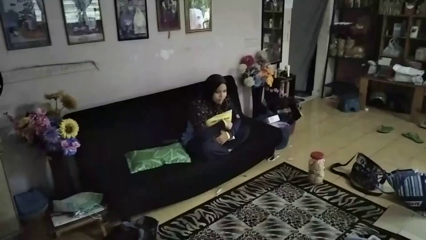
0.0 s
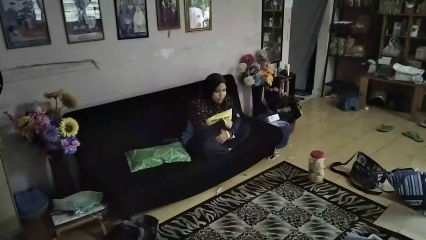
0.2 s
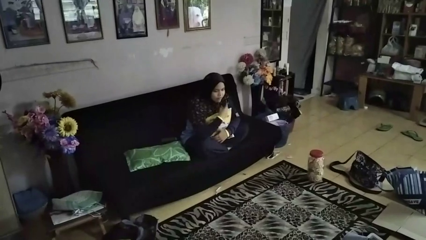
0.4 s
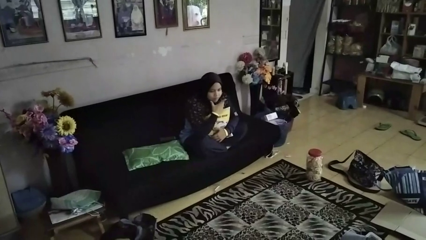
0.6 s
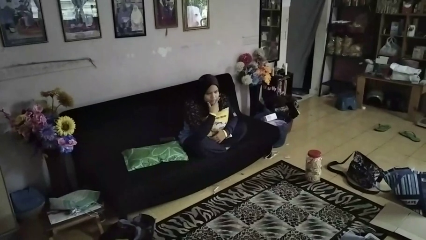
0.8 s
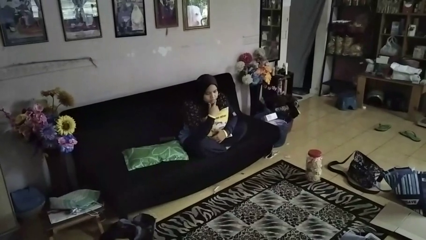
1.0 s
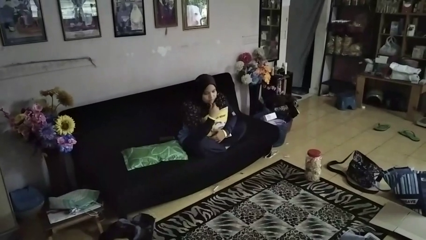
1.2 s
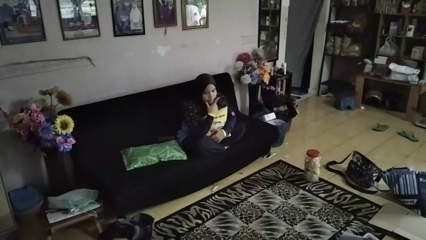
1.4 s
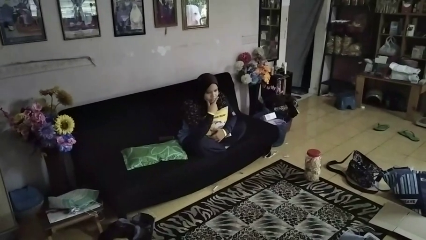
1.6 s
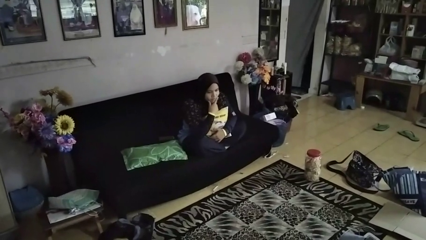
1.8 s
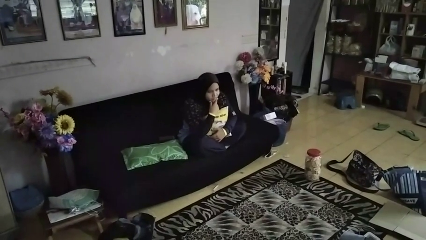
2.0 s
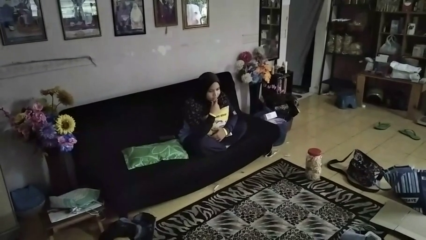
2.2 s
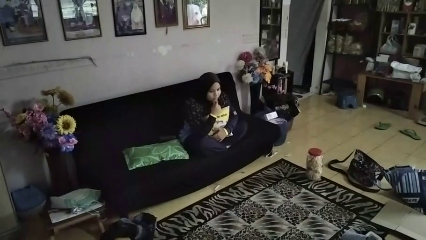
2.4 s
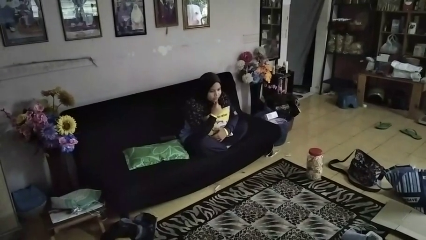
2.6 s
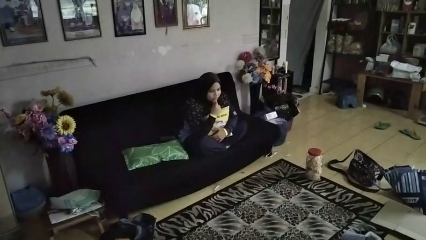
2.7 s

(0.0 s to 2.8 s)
person strokes chin

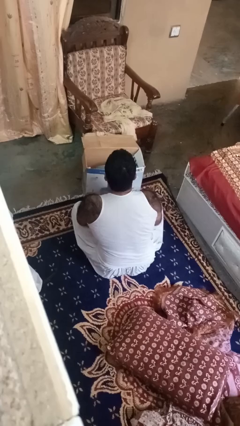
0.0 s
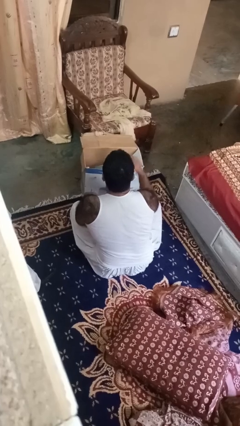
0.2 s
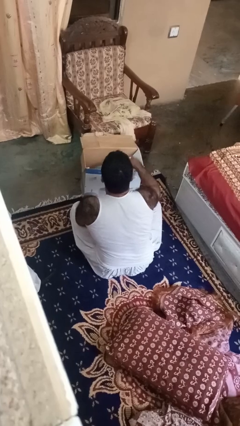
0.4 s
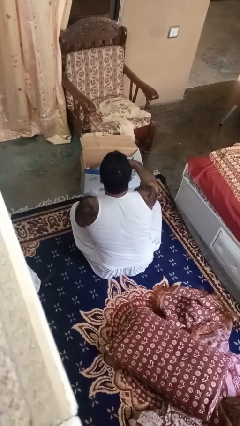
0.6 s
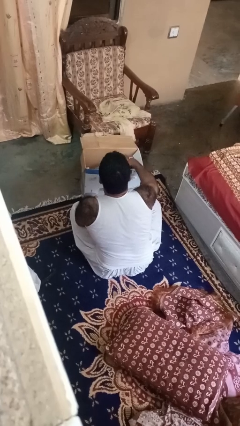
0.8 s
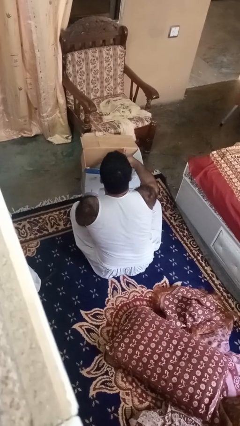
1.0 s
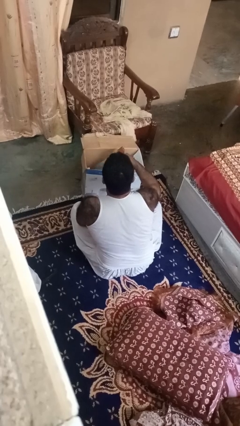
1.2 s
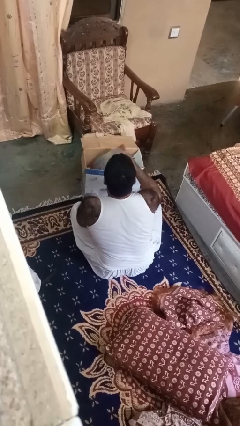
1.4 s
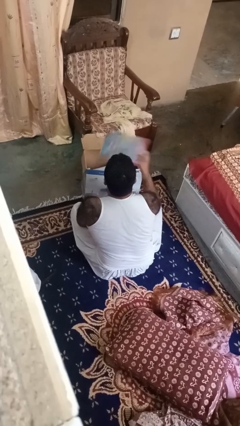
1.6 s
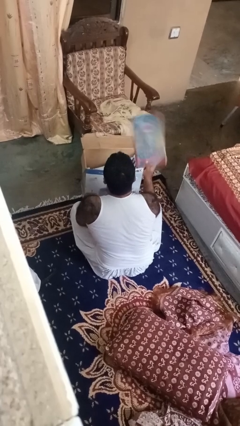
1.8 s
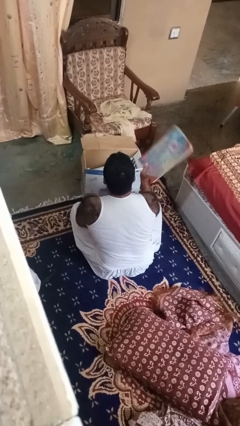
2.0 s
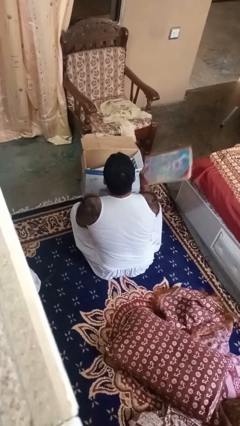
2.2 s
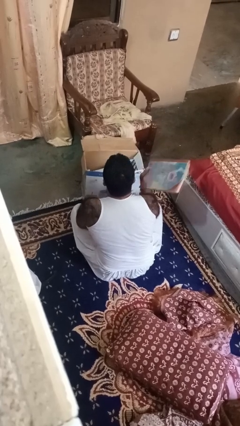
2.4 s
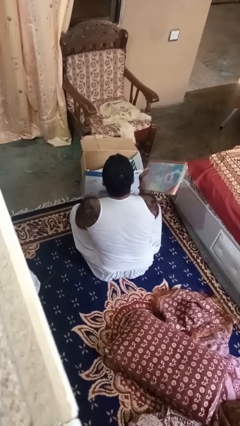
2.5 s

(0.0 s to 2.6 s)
person takes object from box

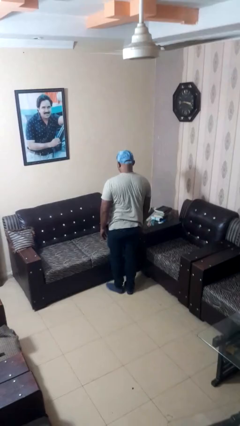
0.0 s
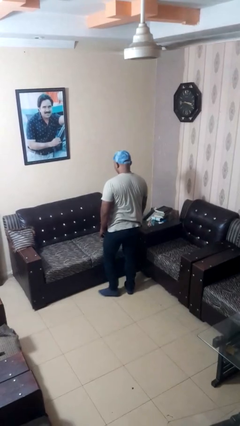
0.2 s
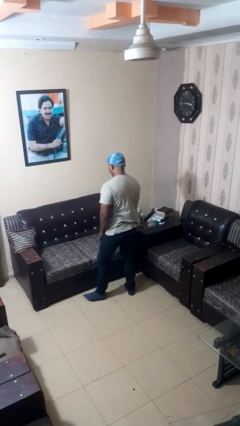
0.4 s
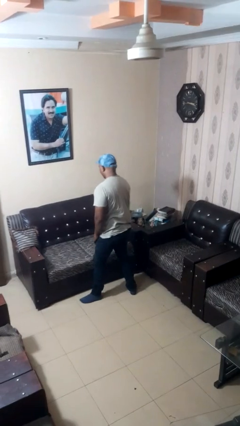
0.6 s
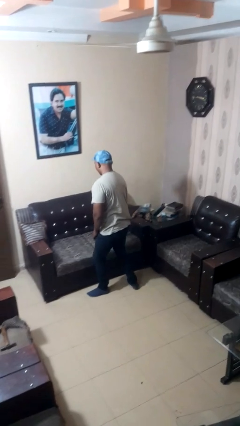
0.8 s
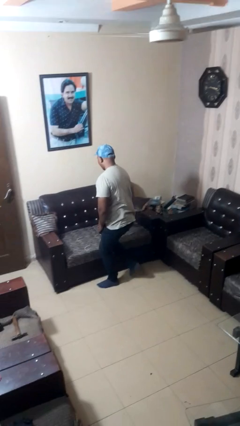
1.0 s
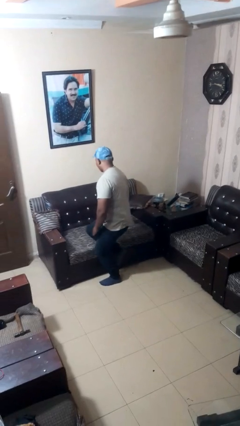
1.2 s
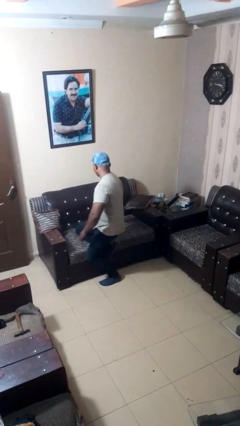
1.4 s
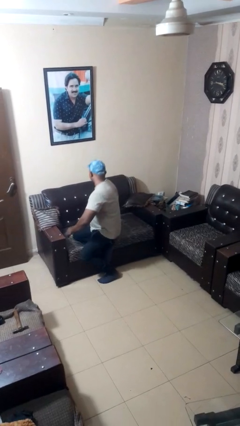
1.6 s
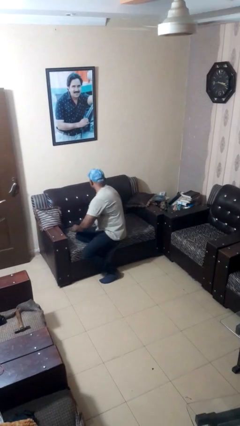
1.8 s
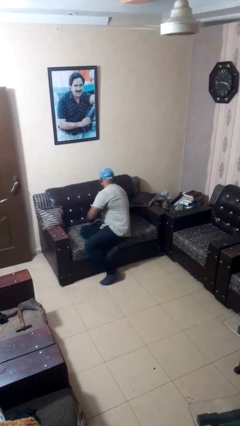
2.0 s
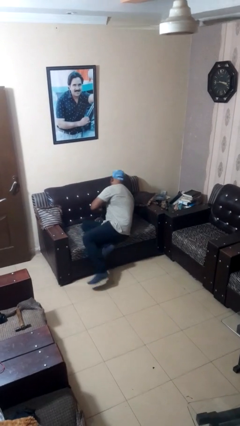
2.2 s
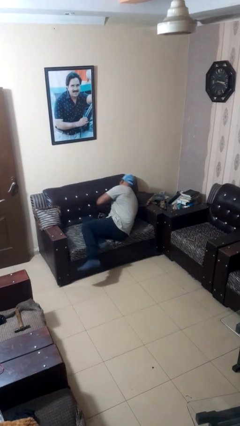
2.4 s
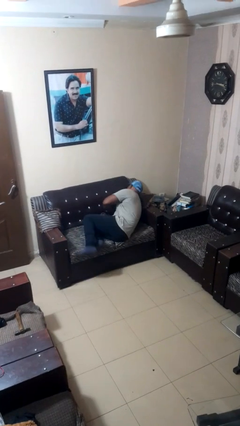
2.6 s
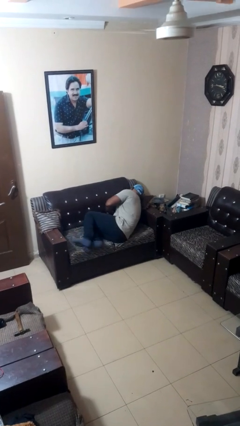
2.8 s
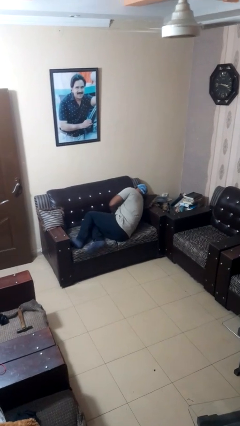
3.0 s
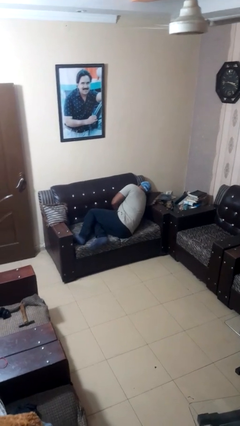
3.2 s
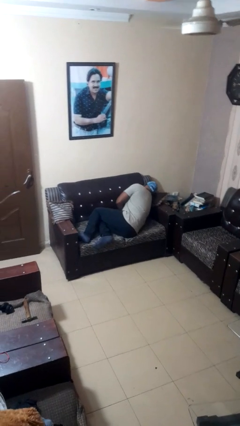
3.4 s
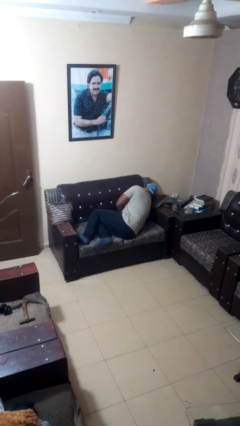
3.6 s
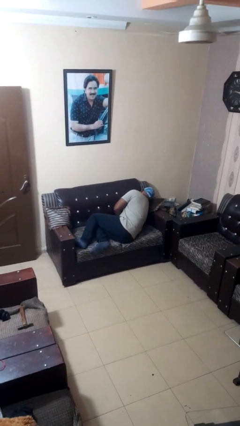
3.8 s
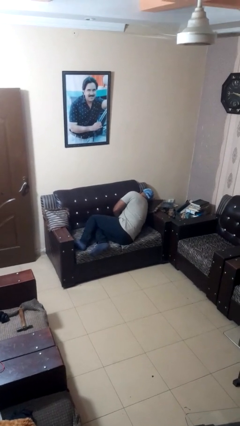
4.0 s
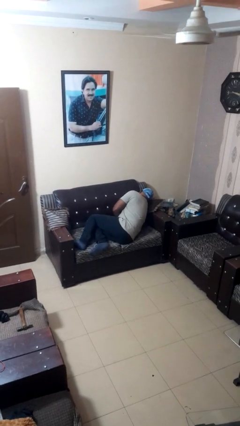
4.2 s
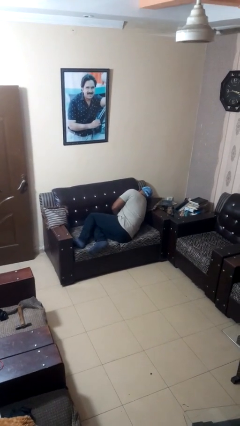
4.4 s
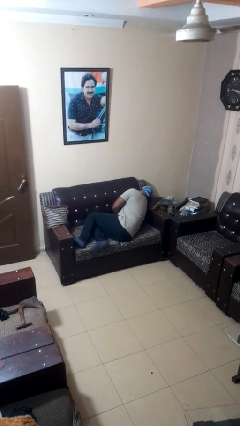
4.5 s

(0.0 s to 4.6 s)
person lies down on couch

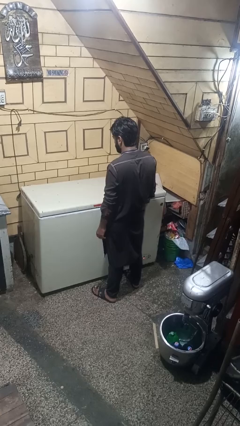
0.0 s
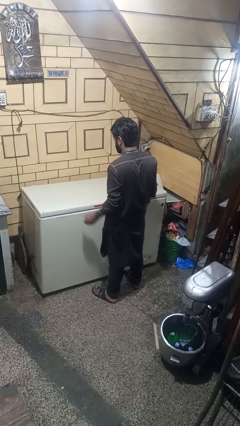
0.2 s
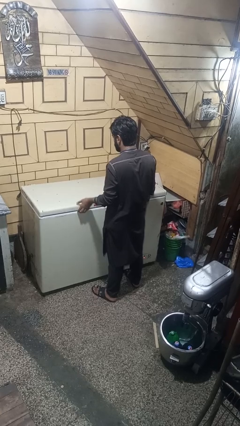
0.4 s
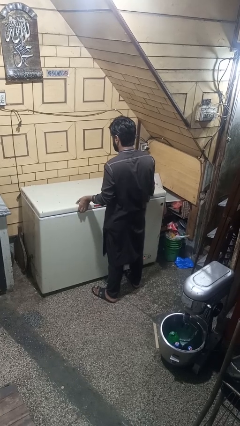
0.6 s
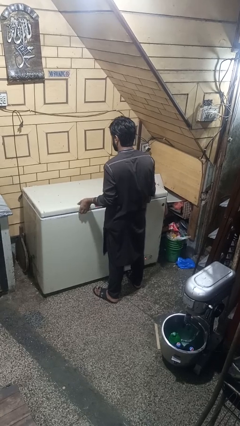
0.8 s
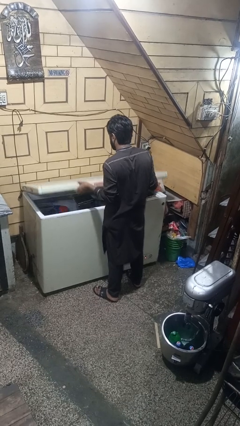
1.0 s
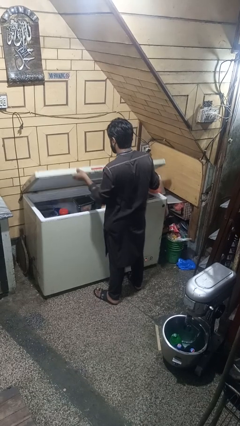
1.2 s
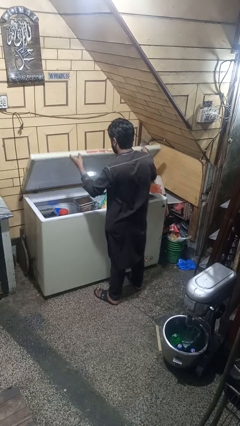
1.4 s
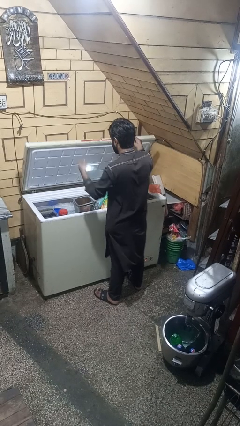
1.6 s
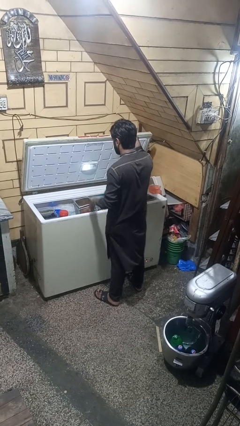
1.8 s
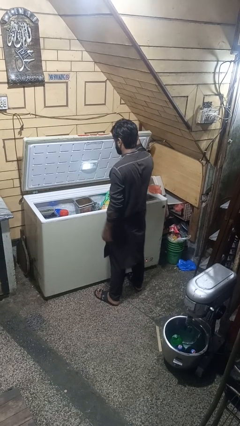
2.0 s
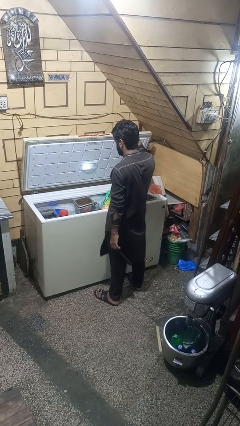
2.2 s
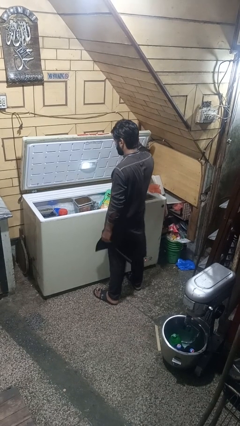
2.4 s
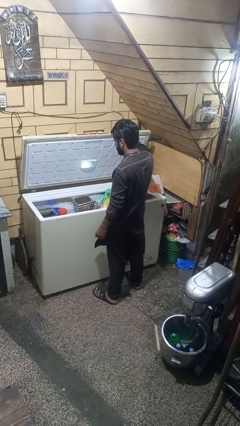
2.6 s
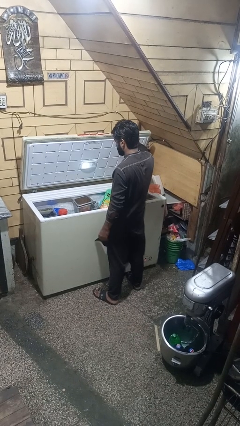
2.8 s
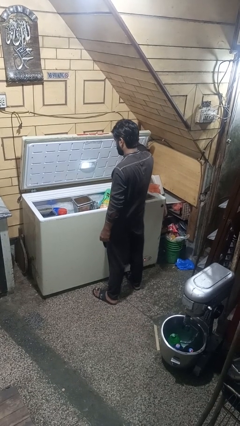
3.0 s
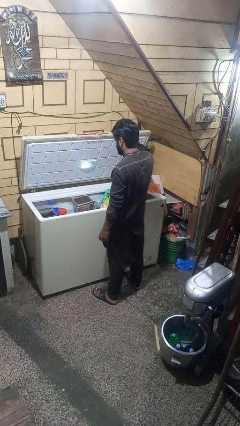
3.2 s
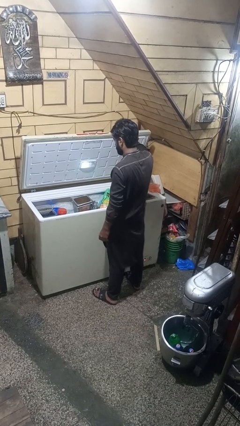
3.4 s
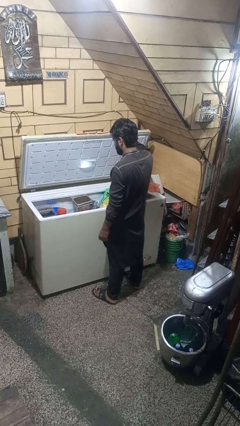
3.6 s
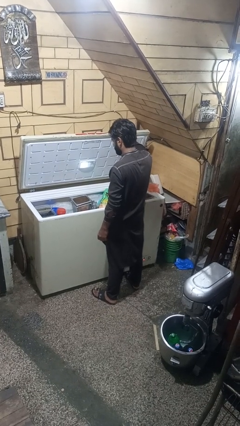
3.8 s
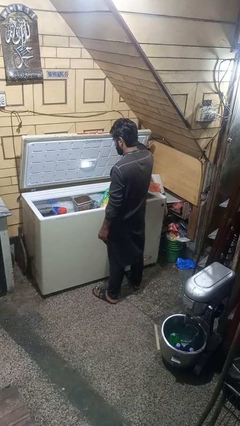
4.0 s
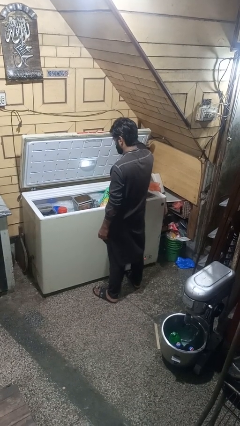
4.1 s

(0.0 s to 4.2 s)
person opens refrigerator

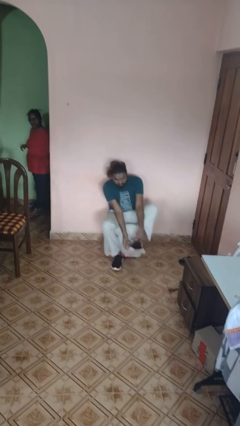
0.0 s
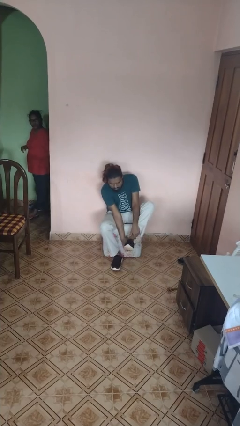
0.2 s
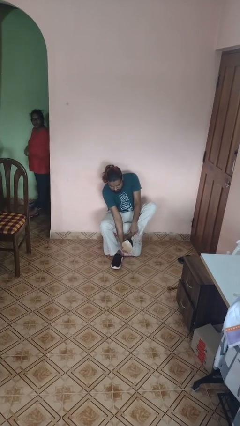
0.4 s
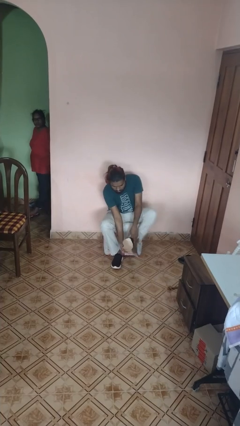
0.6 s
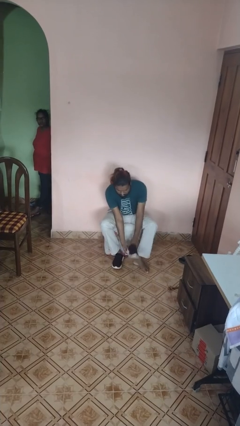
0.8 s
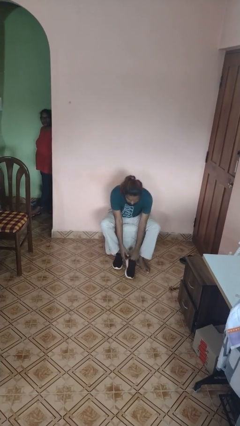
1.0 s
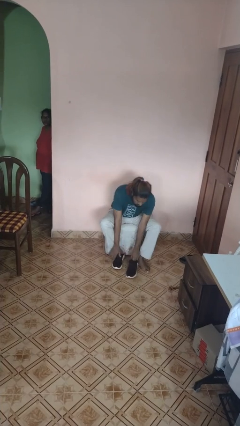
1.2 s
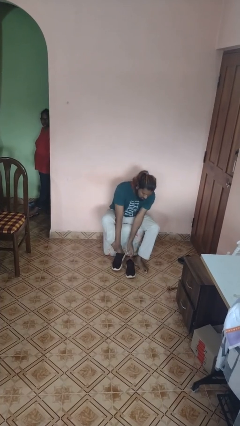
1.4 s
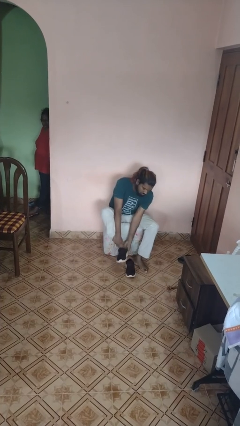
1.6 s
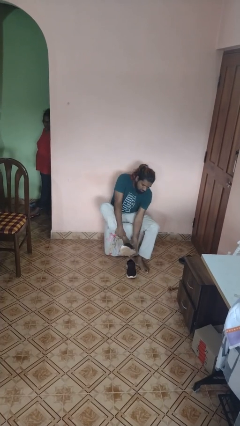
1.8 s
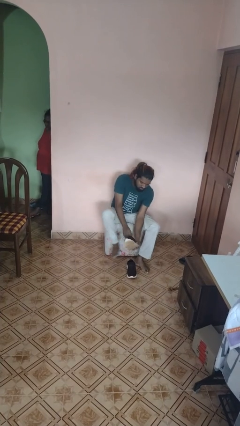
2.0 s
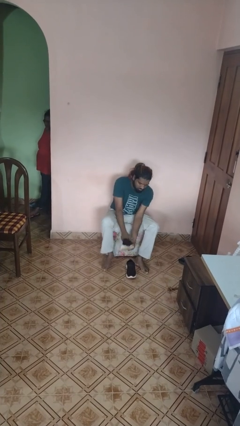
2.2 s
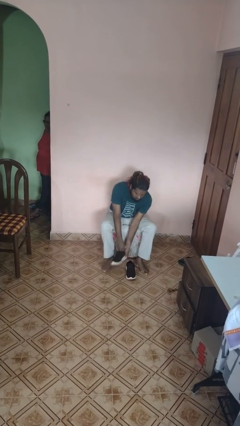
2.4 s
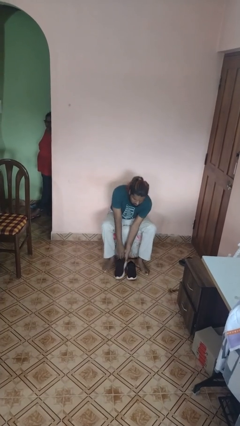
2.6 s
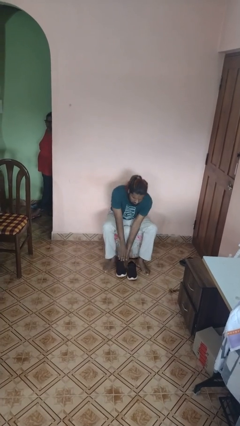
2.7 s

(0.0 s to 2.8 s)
person takes off shoes

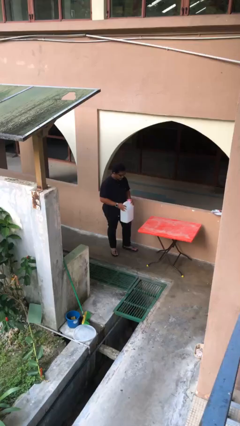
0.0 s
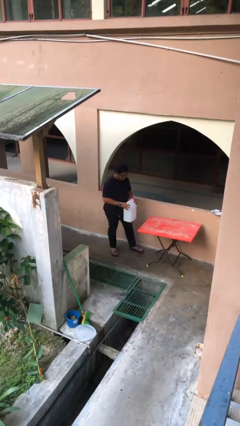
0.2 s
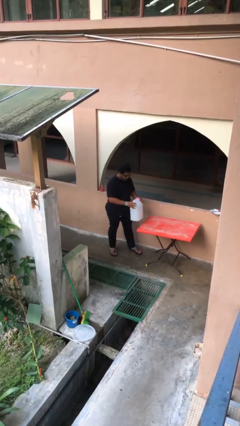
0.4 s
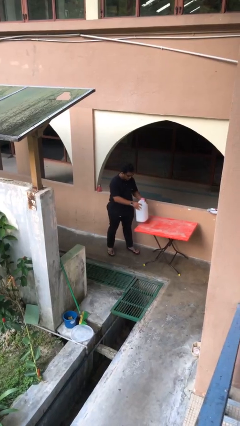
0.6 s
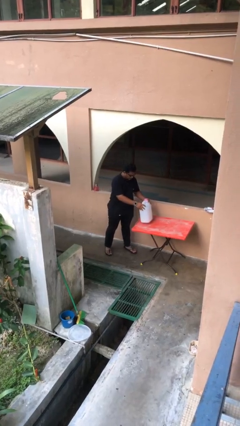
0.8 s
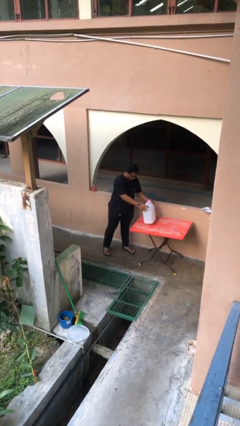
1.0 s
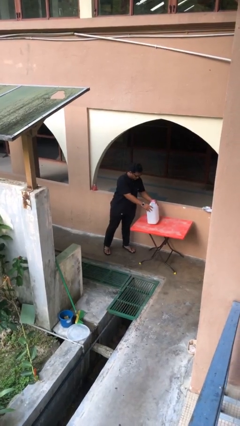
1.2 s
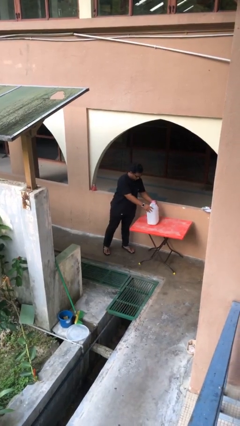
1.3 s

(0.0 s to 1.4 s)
person puts down object on table
